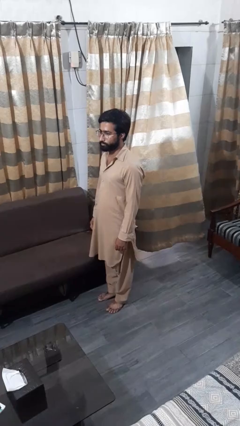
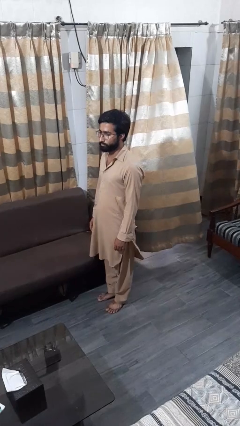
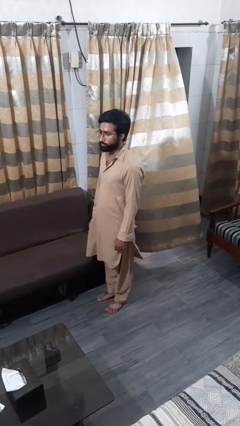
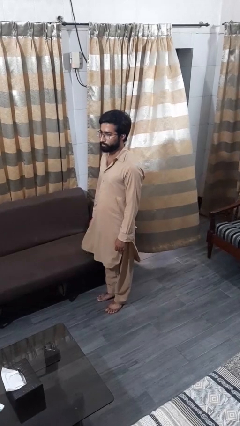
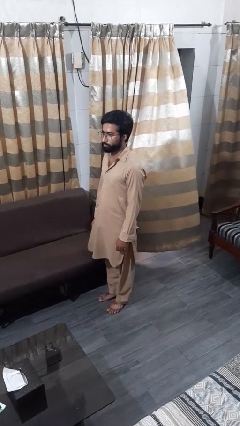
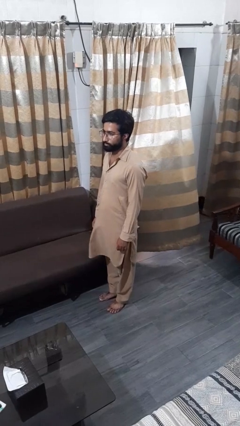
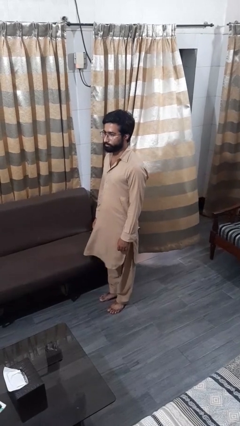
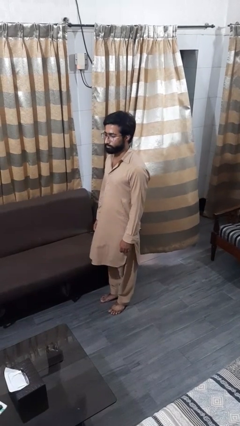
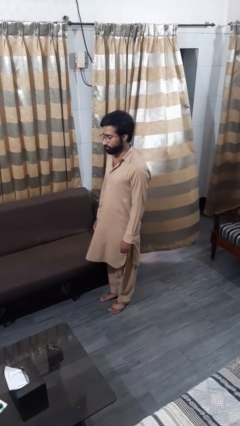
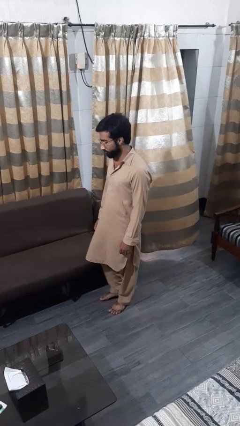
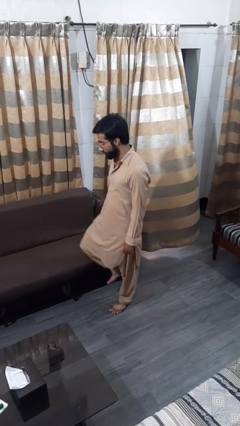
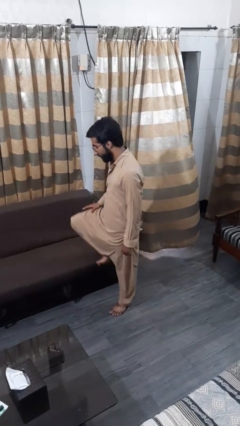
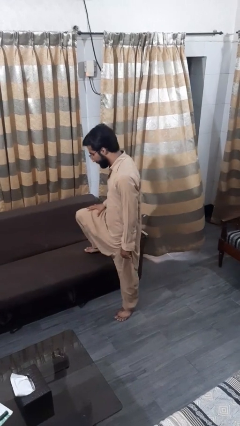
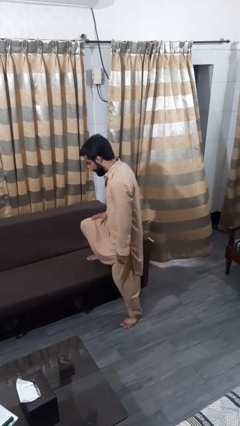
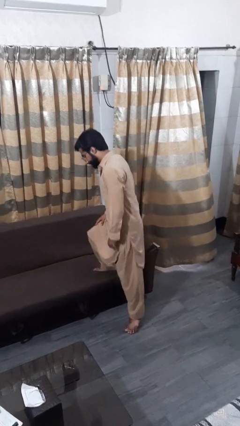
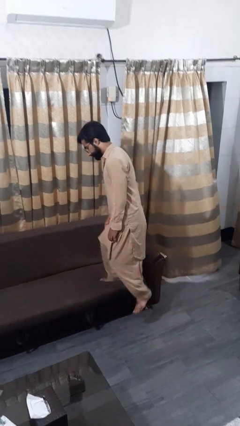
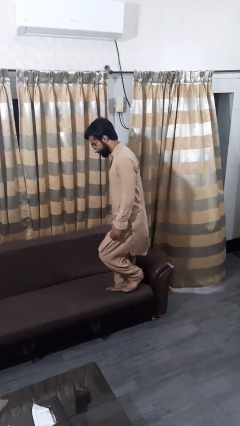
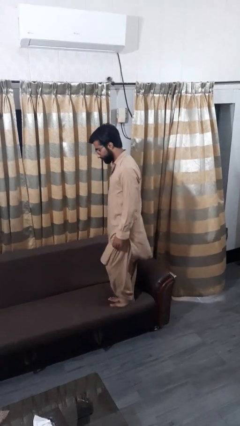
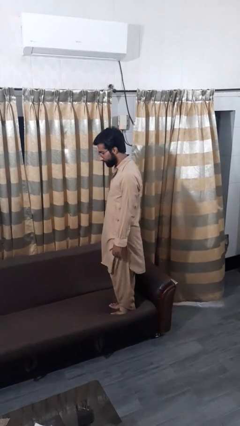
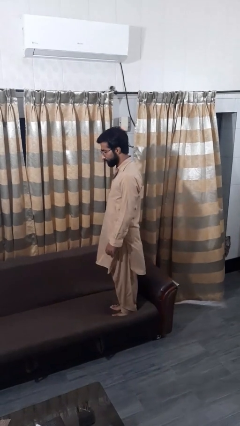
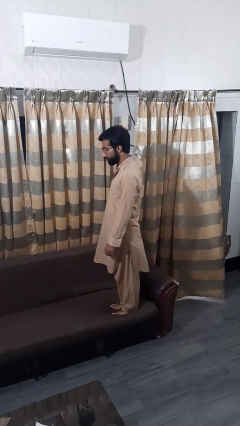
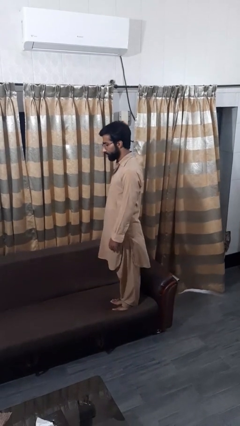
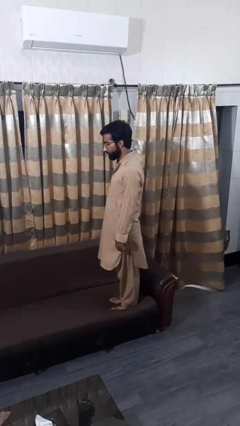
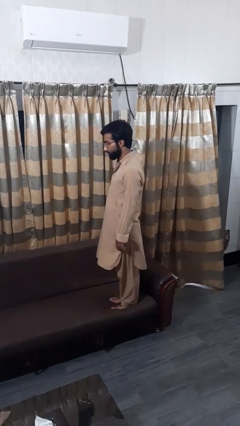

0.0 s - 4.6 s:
person climbs on couch

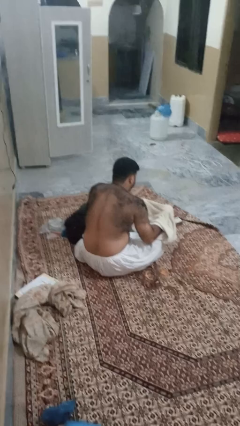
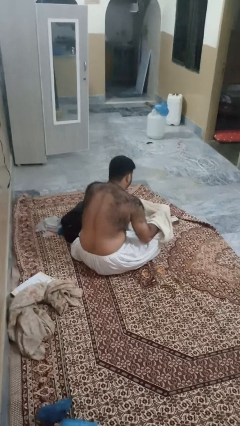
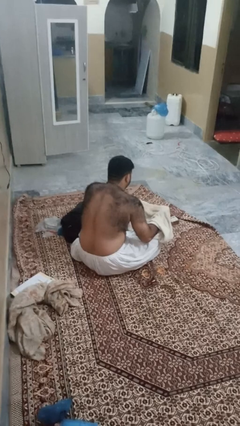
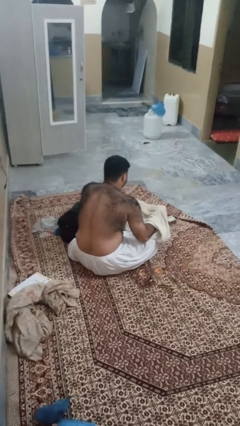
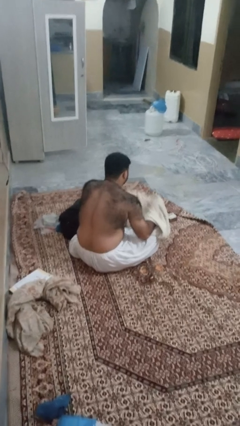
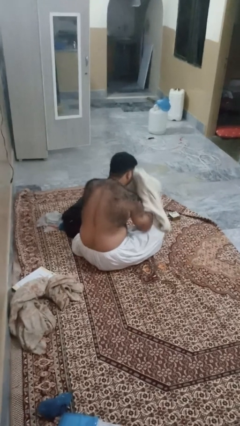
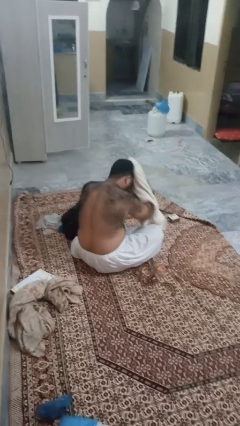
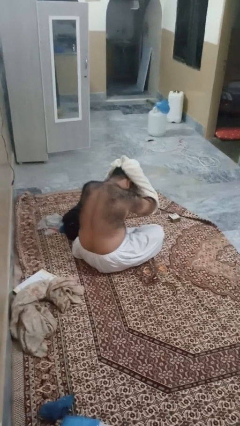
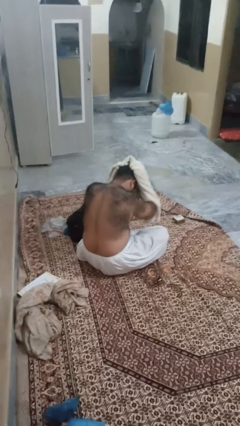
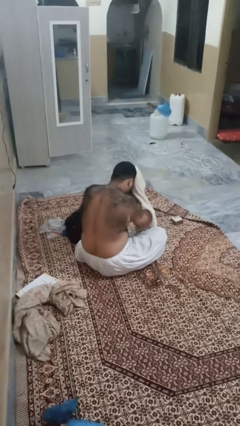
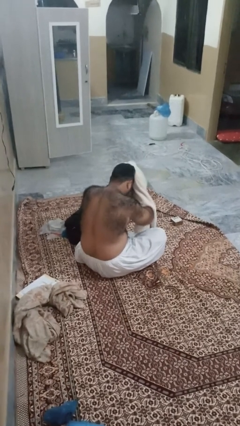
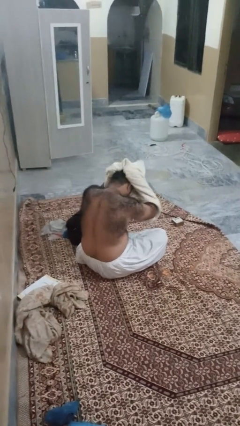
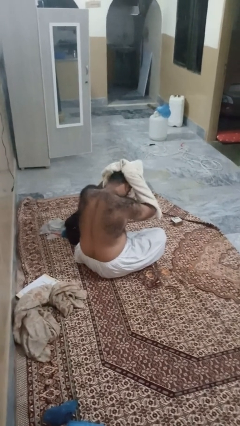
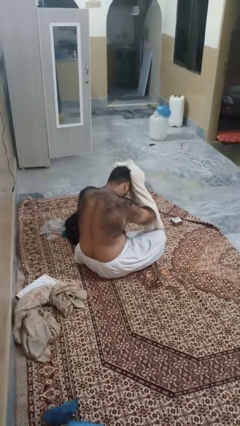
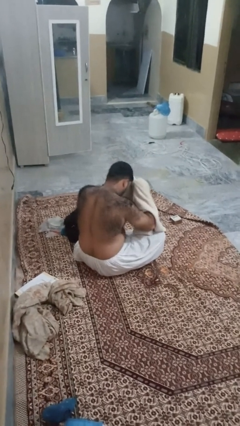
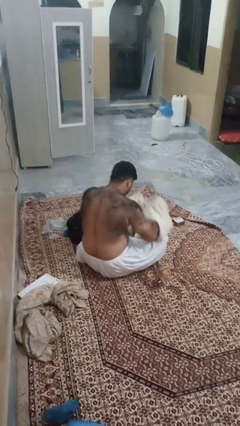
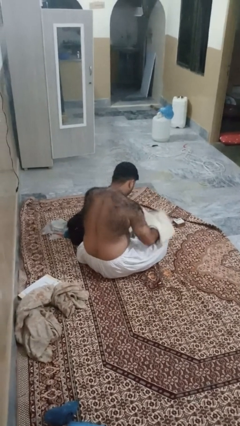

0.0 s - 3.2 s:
person dries hair with towel

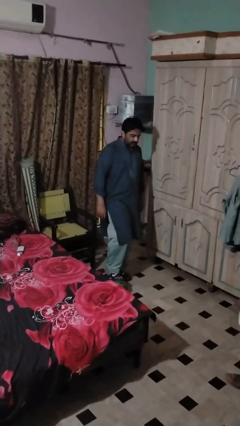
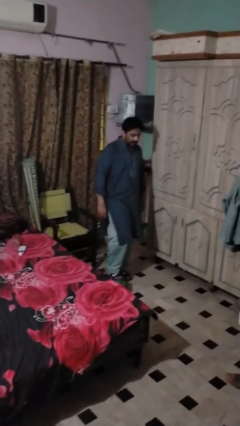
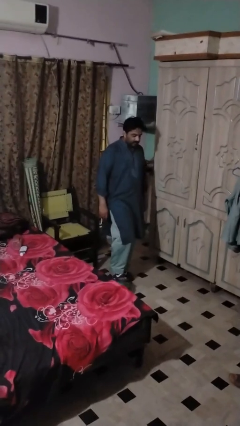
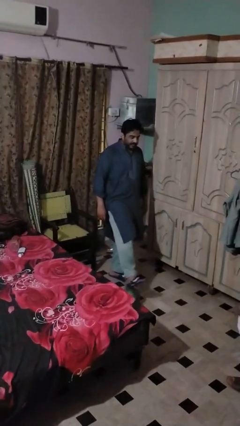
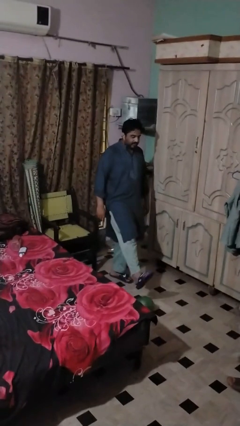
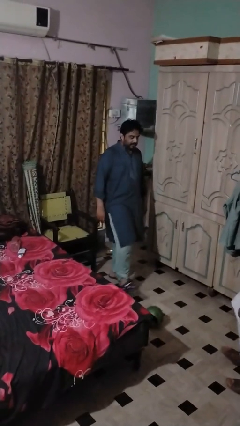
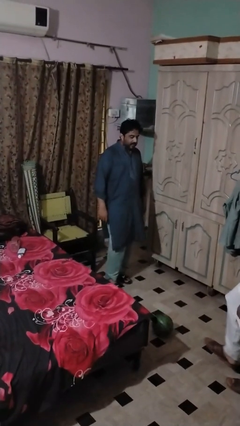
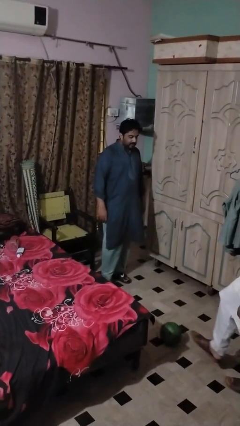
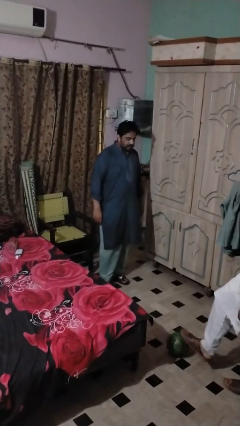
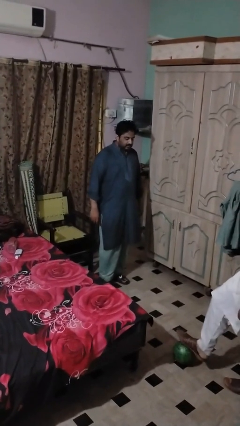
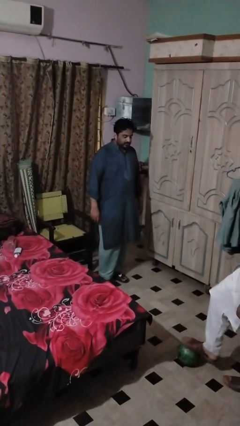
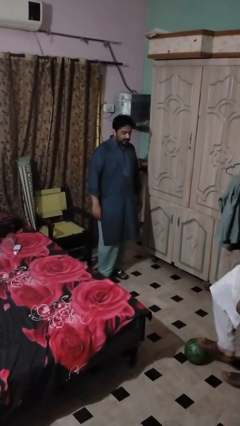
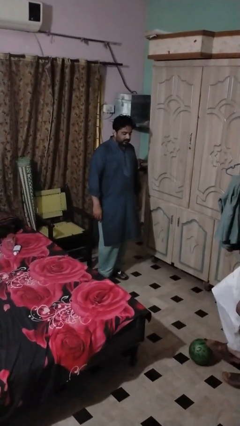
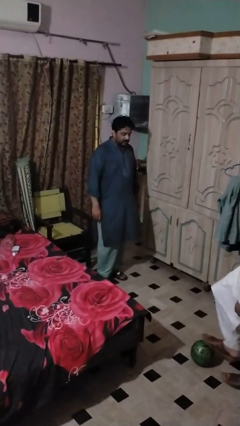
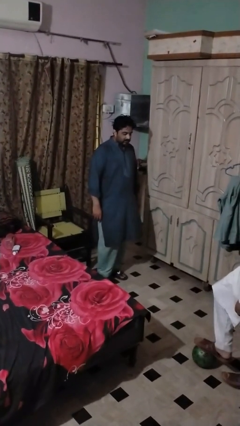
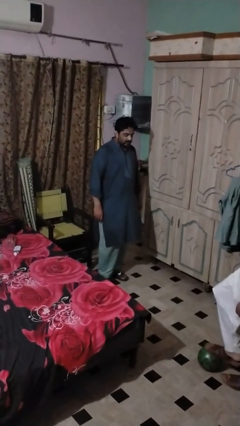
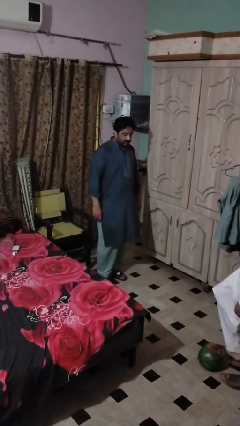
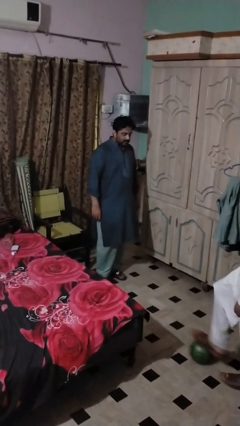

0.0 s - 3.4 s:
person kicks object to person

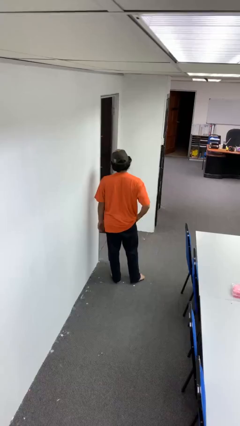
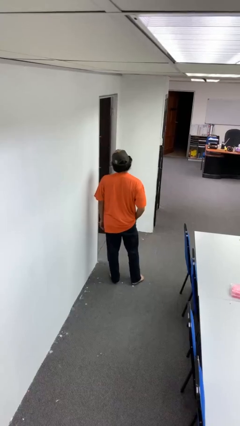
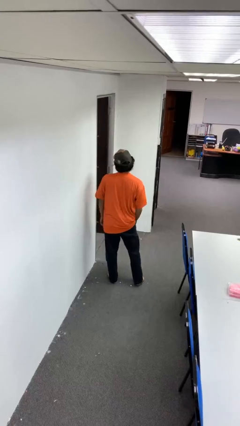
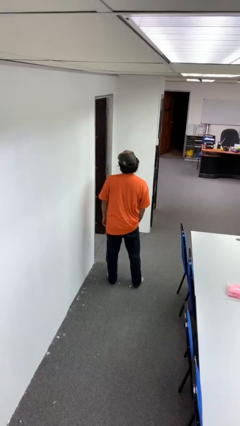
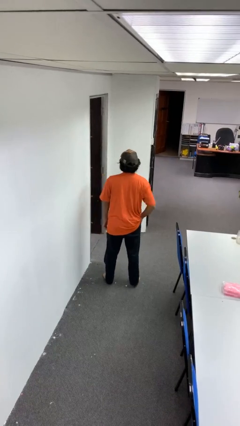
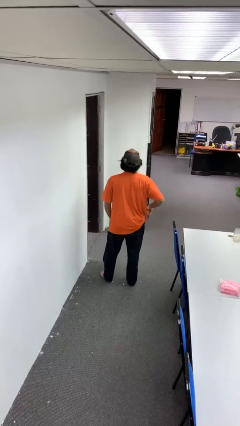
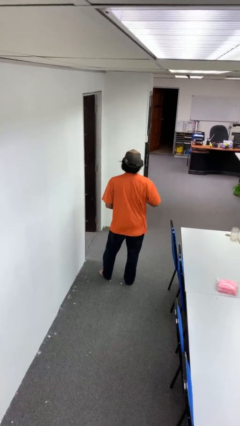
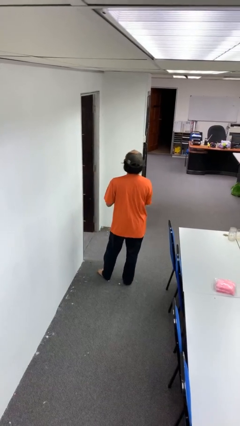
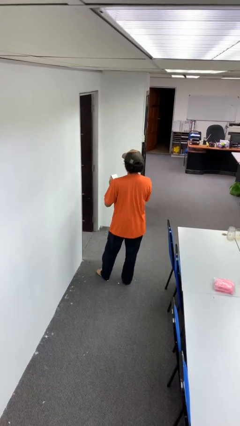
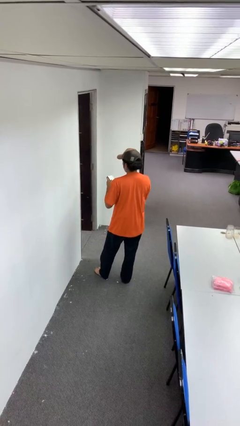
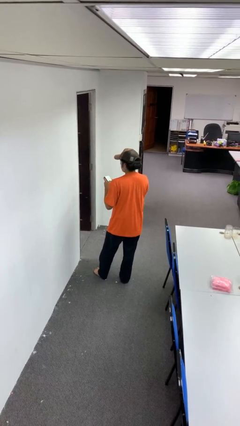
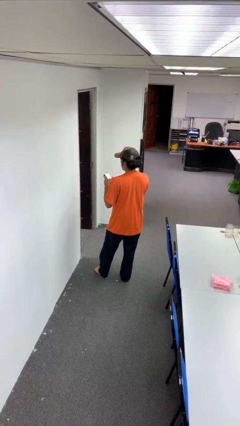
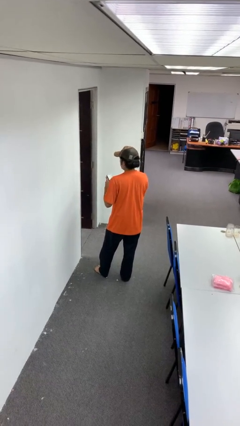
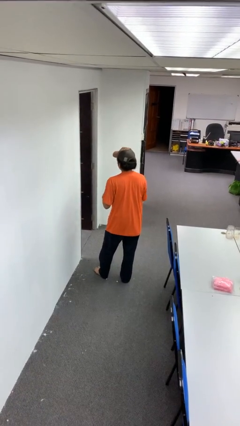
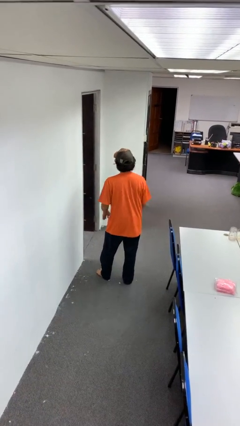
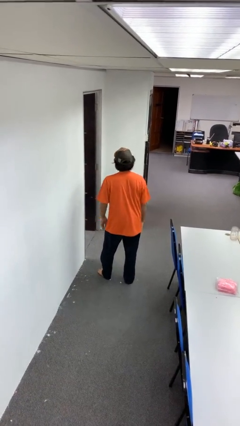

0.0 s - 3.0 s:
person takes phone from pocket

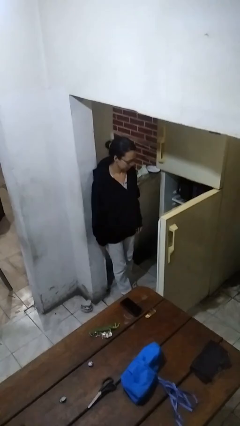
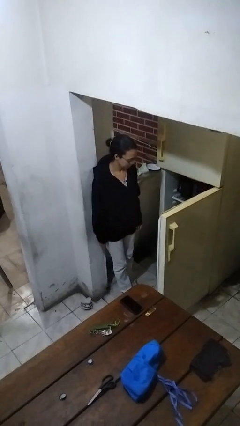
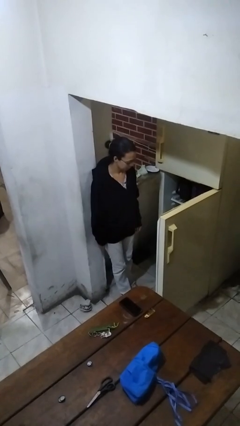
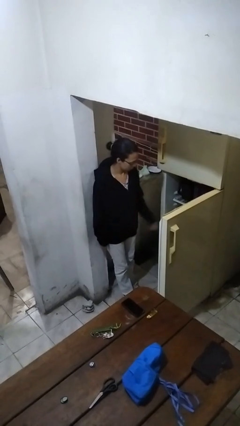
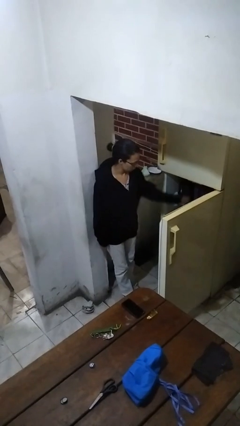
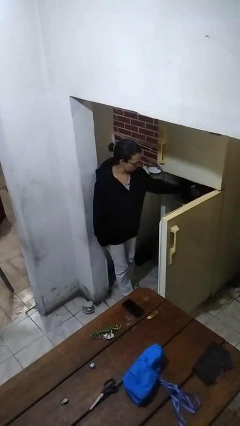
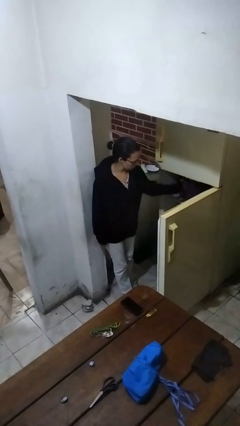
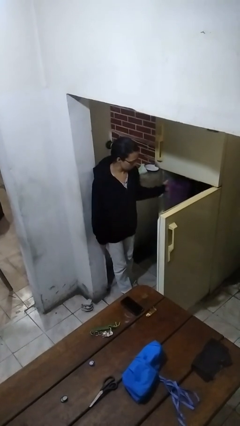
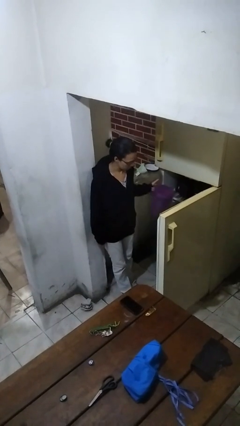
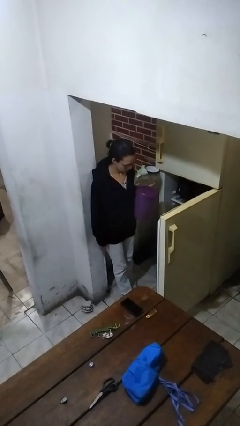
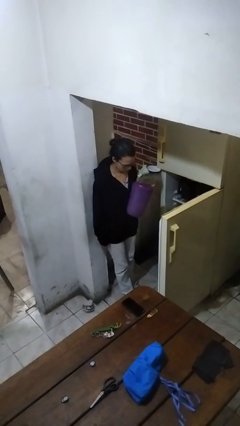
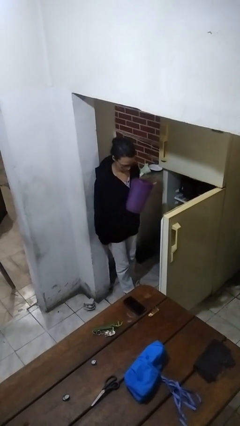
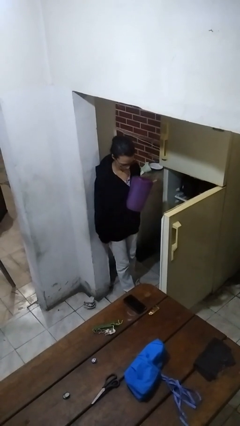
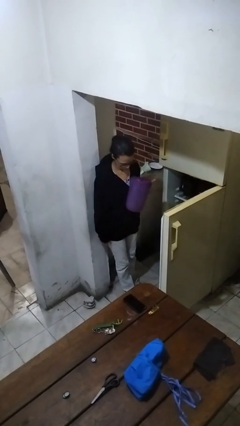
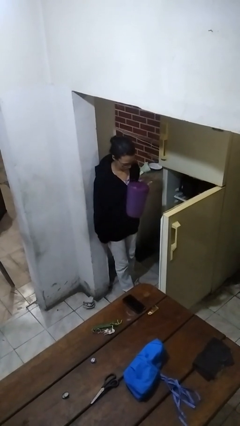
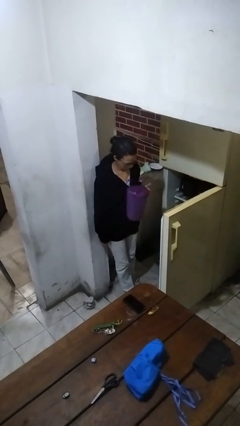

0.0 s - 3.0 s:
person takes object from refrigerator

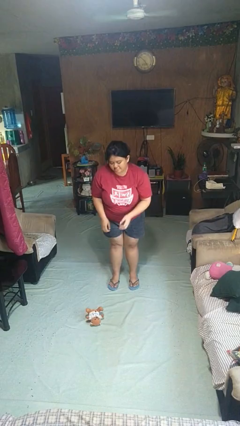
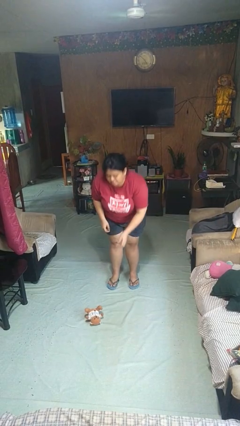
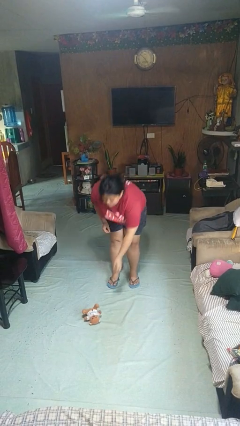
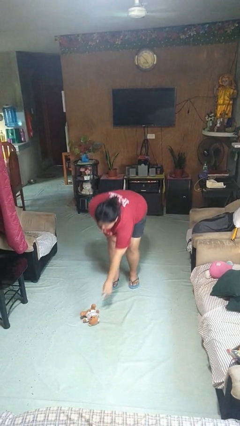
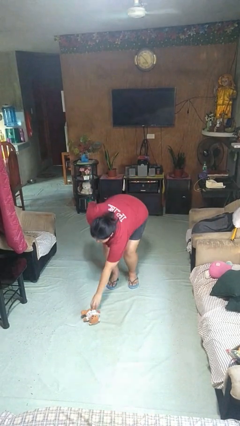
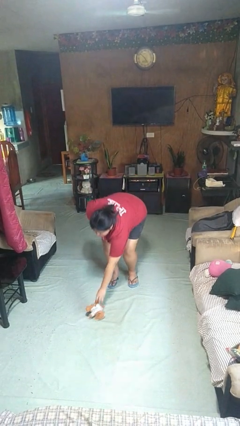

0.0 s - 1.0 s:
person picks up object from floor
